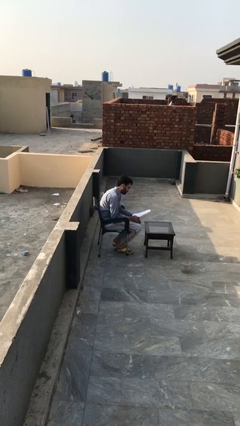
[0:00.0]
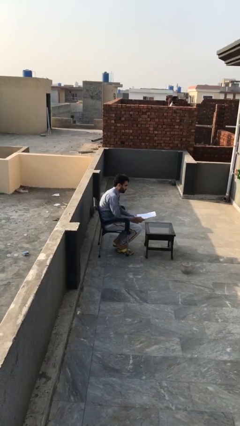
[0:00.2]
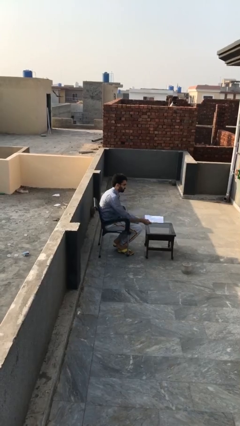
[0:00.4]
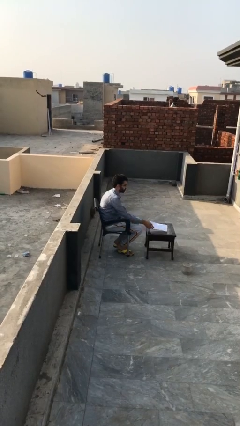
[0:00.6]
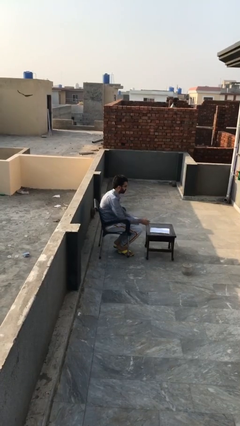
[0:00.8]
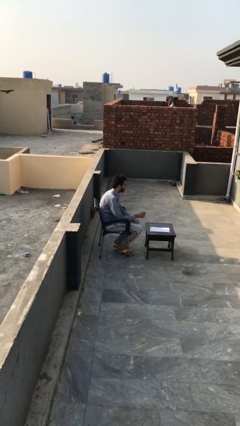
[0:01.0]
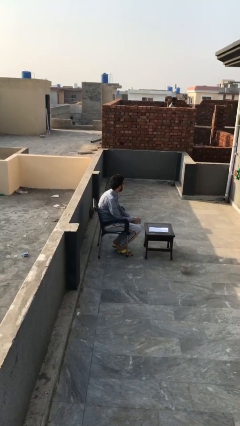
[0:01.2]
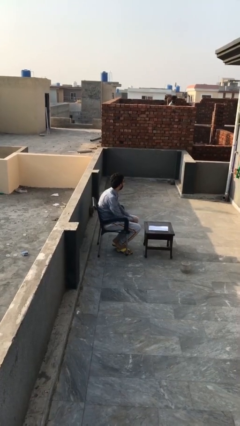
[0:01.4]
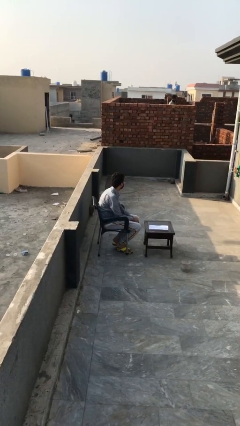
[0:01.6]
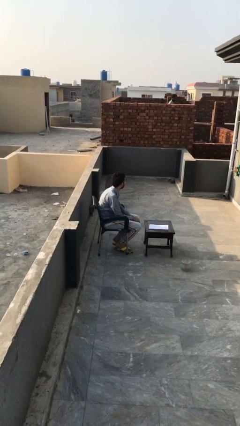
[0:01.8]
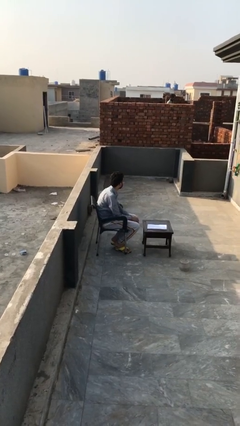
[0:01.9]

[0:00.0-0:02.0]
person puts down object on table

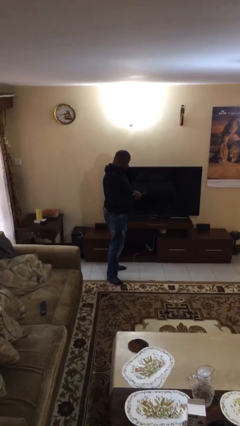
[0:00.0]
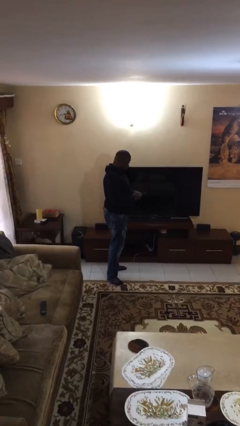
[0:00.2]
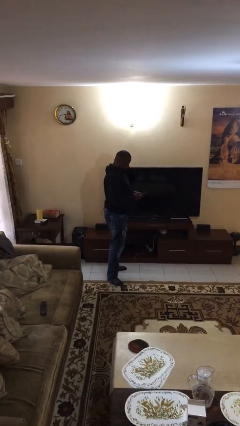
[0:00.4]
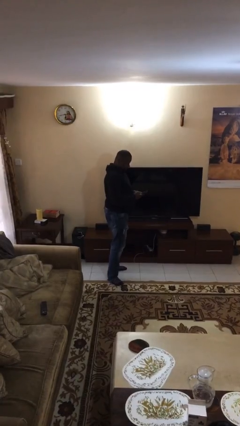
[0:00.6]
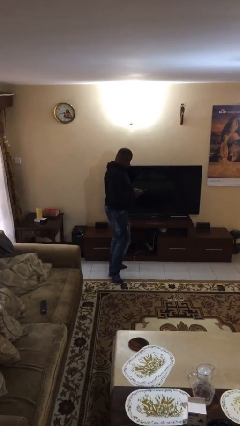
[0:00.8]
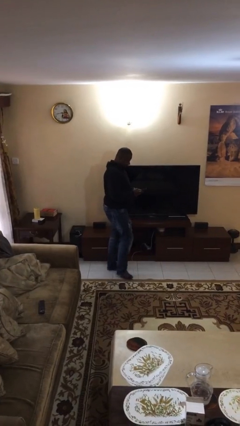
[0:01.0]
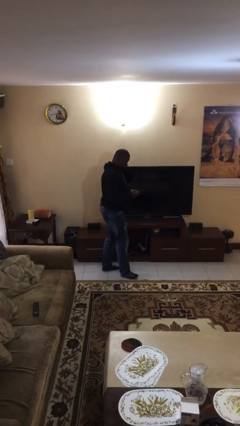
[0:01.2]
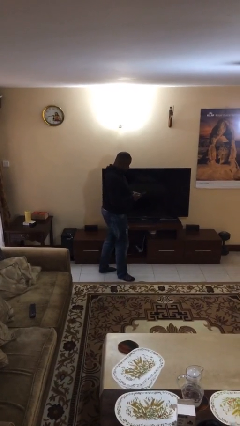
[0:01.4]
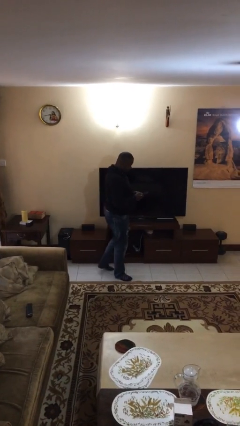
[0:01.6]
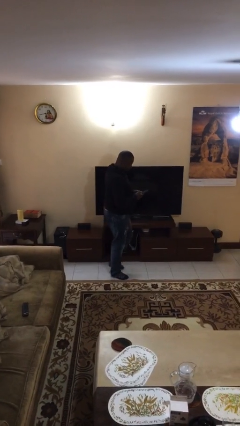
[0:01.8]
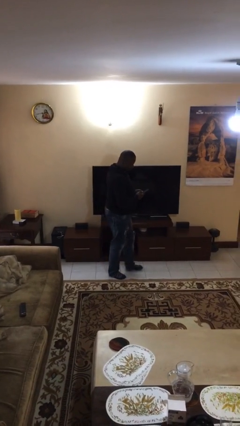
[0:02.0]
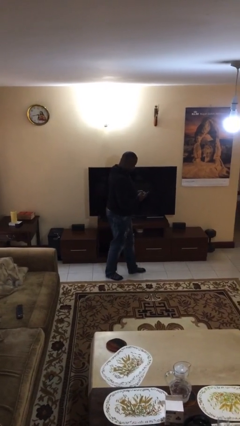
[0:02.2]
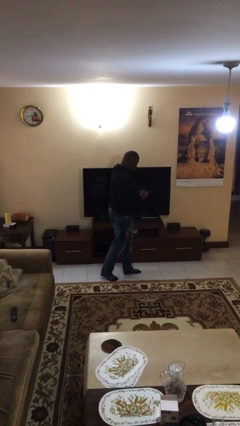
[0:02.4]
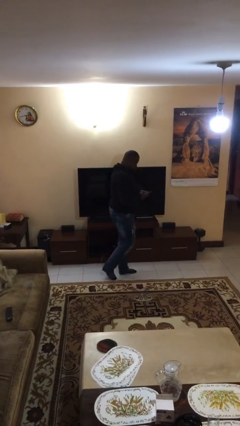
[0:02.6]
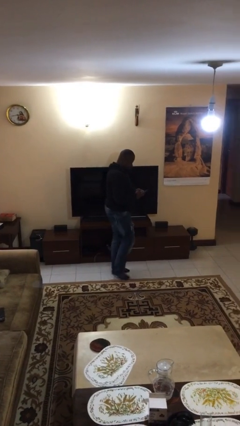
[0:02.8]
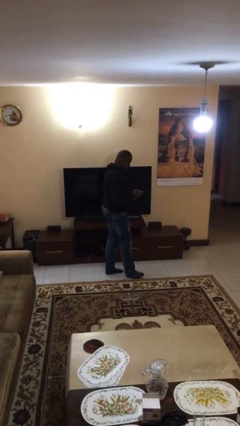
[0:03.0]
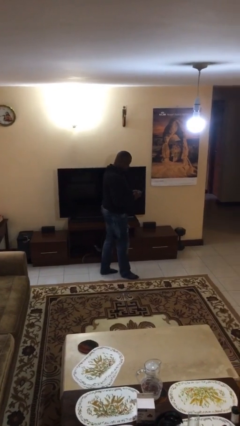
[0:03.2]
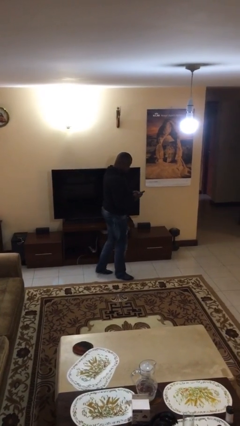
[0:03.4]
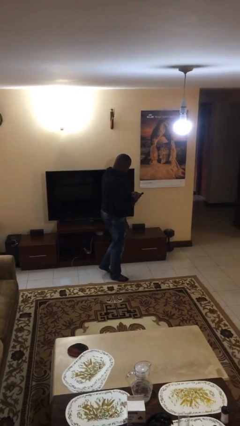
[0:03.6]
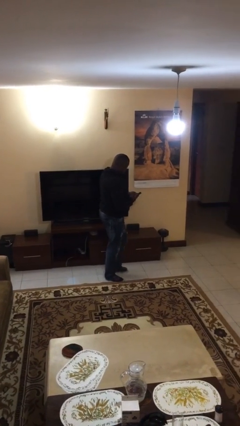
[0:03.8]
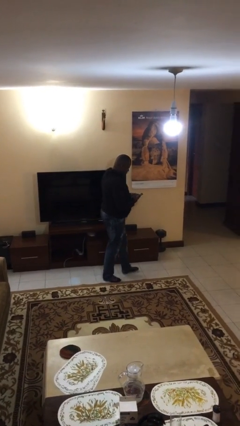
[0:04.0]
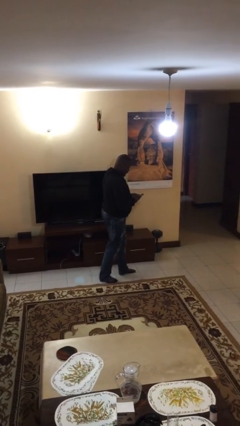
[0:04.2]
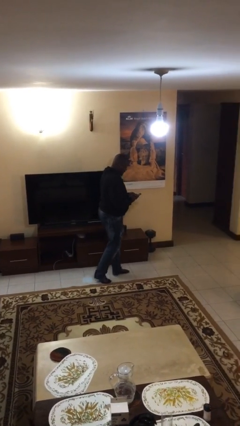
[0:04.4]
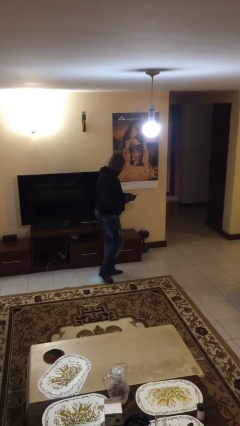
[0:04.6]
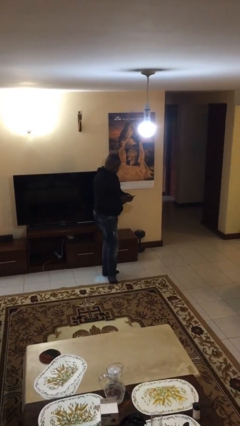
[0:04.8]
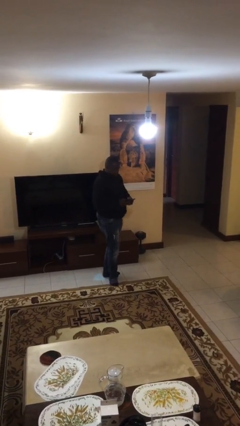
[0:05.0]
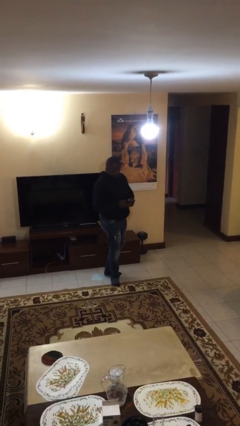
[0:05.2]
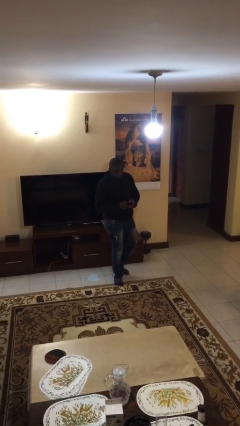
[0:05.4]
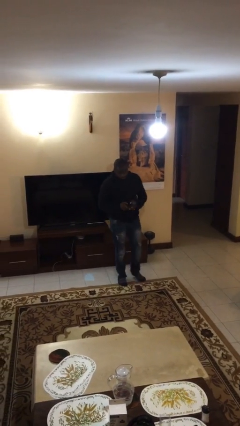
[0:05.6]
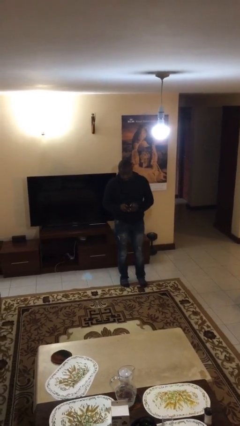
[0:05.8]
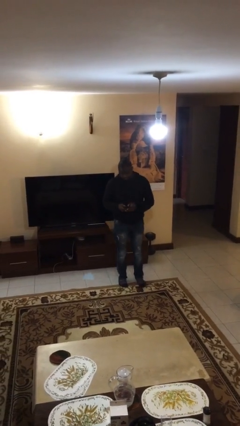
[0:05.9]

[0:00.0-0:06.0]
person texts on phone

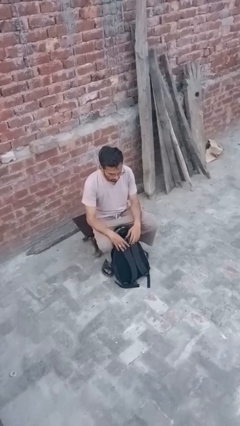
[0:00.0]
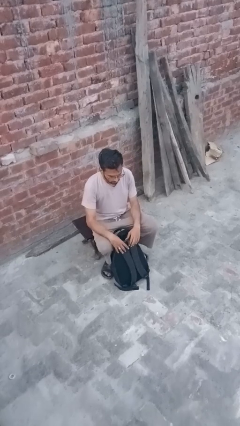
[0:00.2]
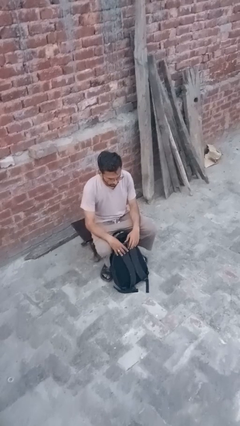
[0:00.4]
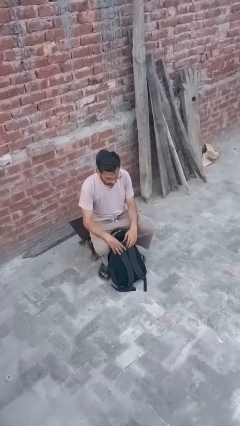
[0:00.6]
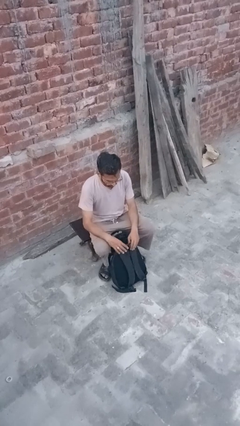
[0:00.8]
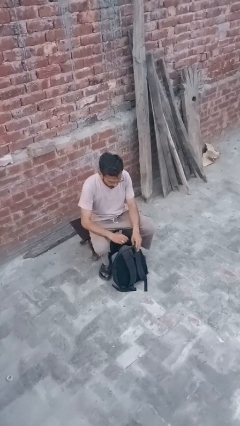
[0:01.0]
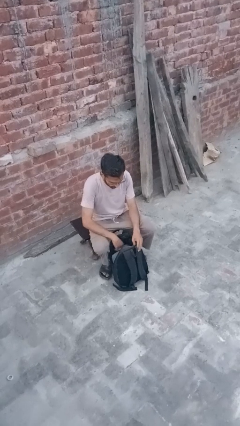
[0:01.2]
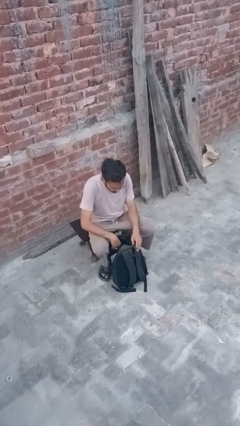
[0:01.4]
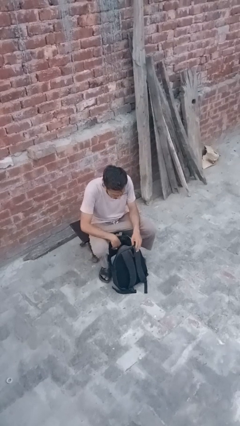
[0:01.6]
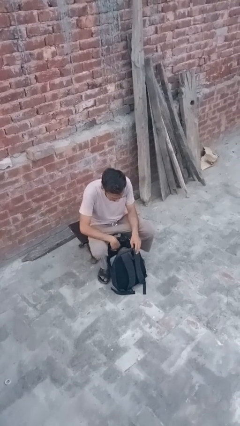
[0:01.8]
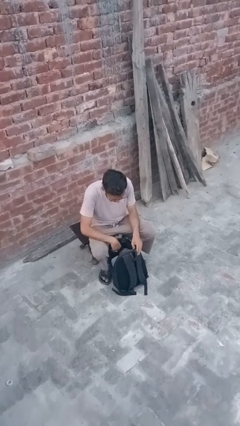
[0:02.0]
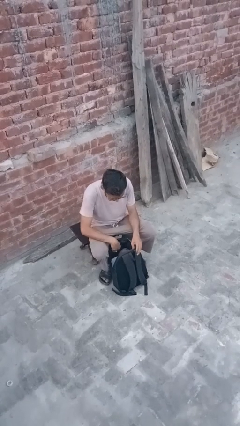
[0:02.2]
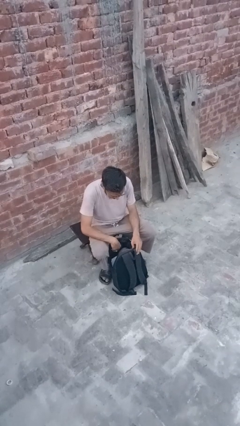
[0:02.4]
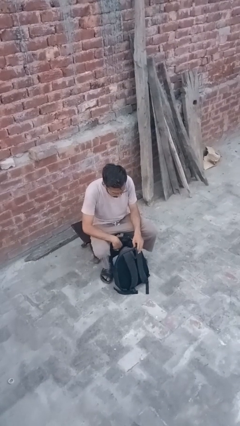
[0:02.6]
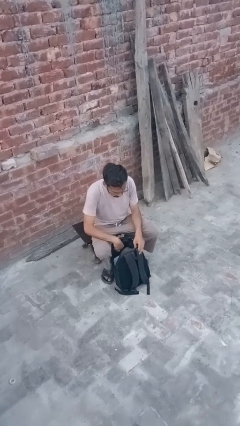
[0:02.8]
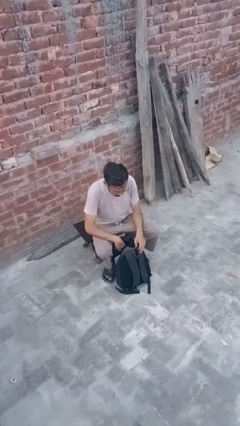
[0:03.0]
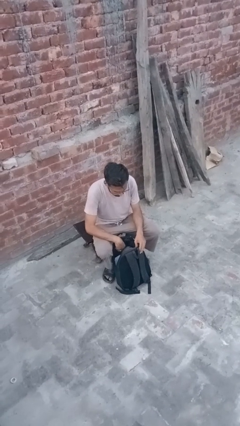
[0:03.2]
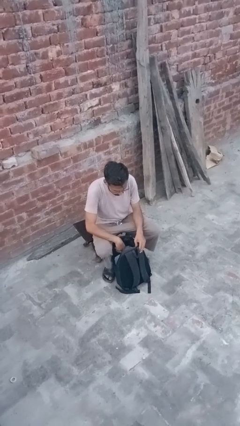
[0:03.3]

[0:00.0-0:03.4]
person searches in backpack

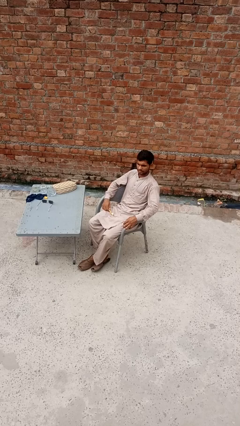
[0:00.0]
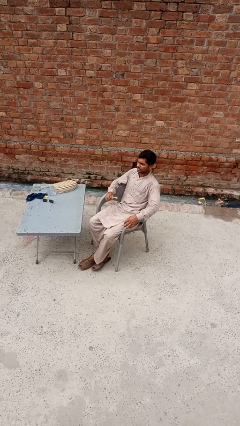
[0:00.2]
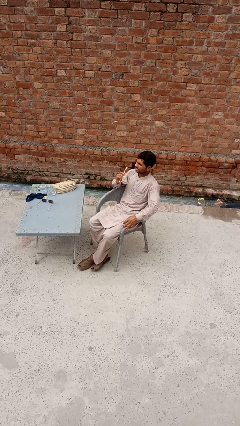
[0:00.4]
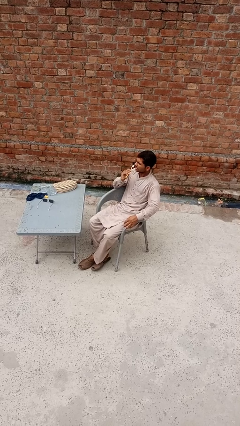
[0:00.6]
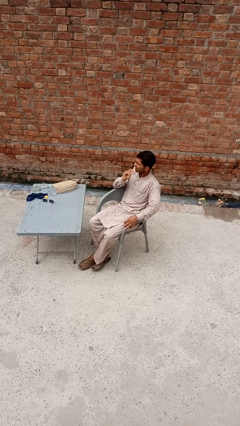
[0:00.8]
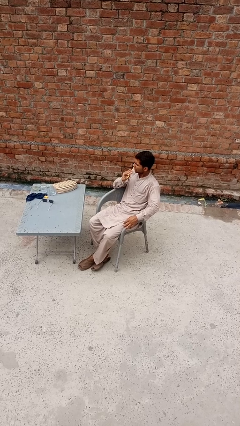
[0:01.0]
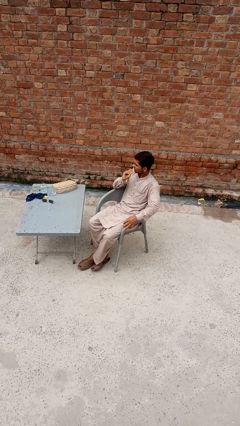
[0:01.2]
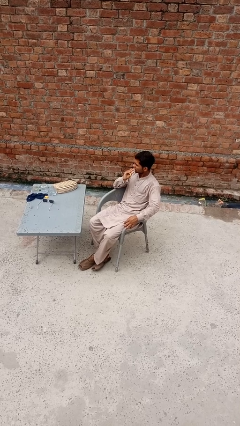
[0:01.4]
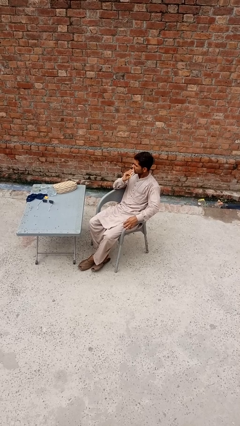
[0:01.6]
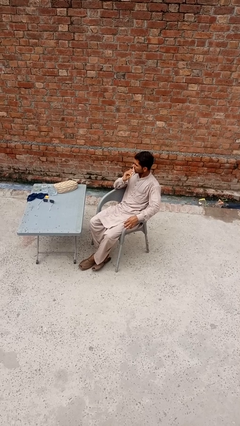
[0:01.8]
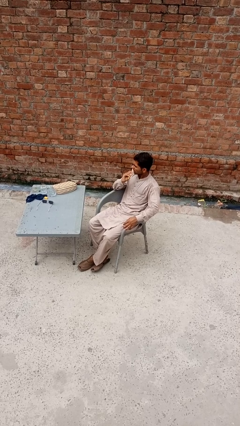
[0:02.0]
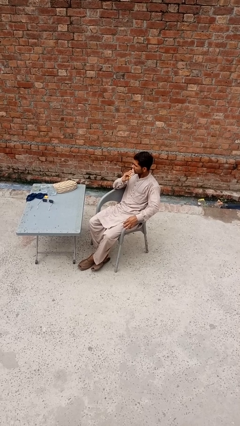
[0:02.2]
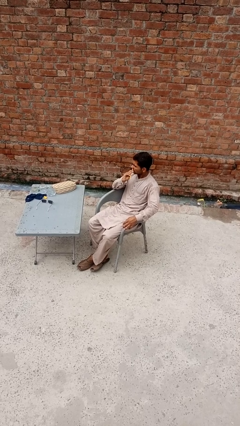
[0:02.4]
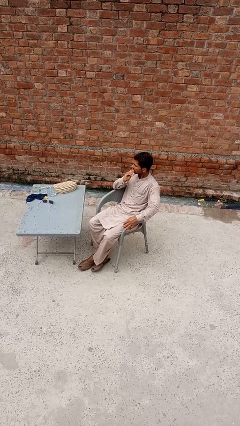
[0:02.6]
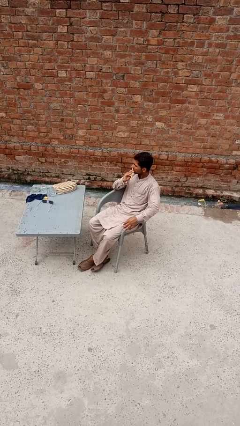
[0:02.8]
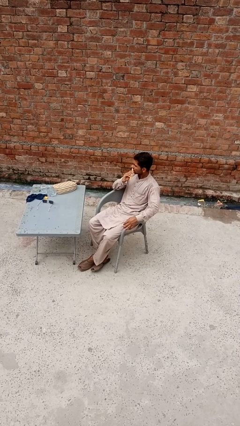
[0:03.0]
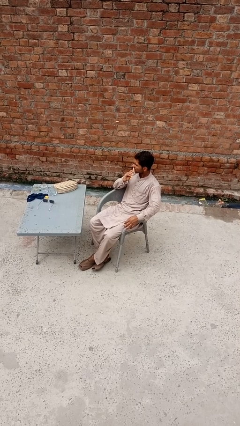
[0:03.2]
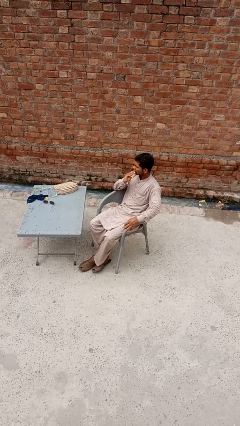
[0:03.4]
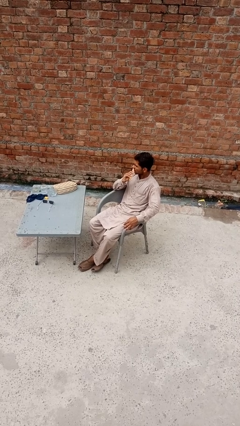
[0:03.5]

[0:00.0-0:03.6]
person brushes teeth

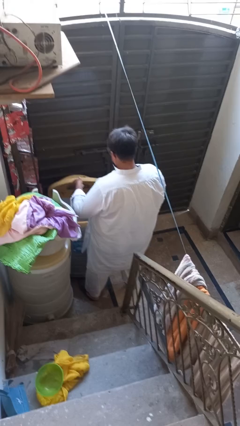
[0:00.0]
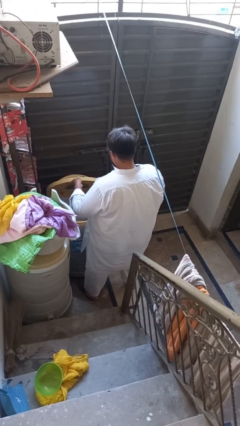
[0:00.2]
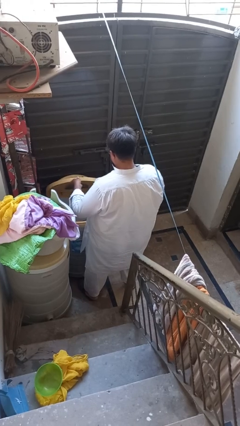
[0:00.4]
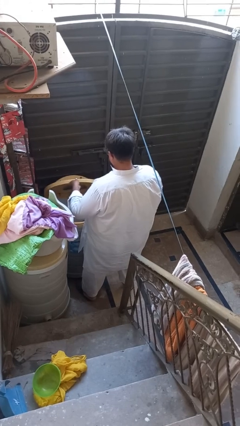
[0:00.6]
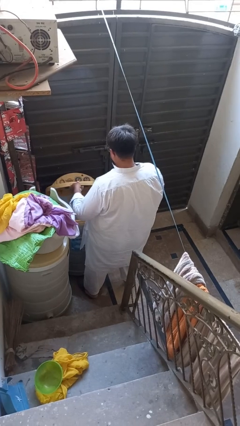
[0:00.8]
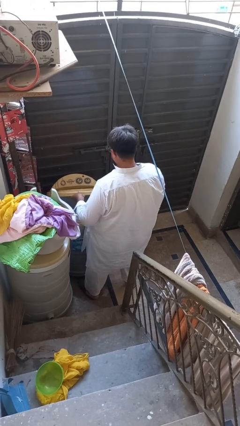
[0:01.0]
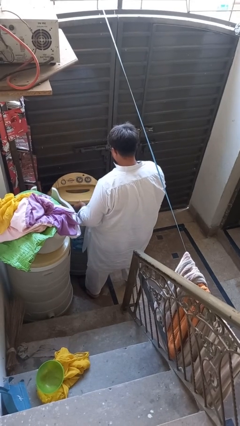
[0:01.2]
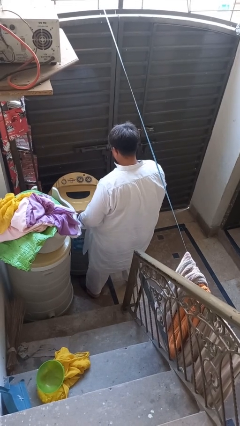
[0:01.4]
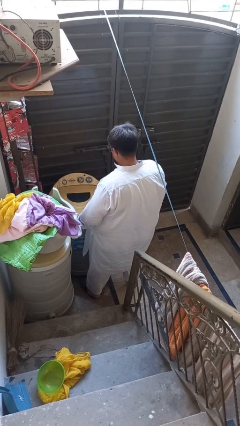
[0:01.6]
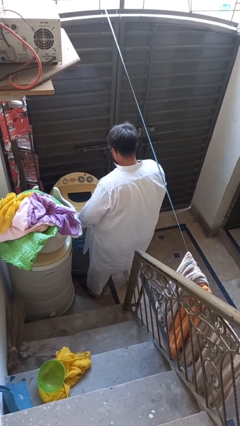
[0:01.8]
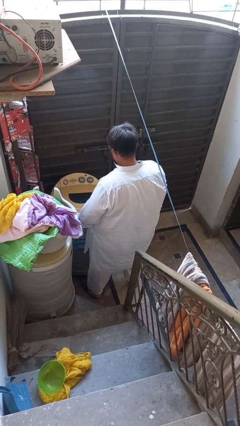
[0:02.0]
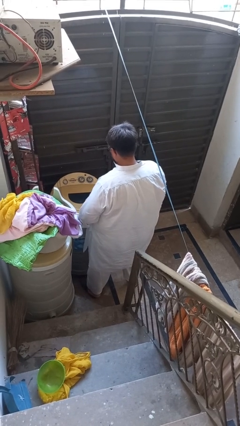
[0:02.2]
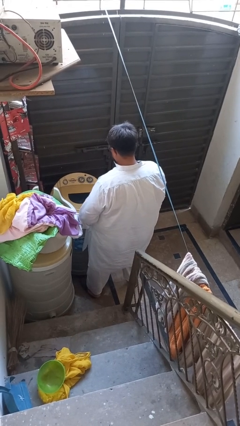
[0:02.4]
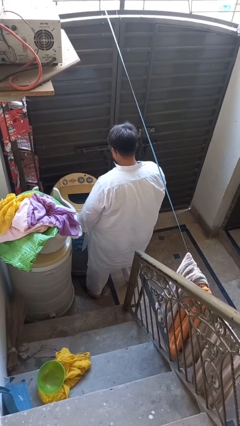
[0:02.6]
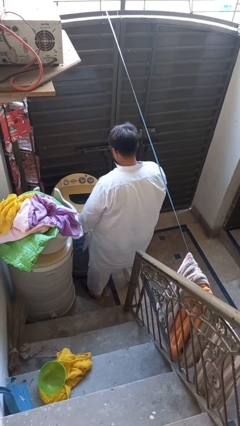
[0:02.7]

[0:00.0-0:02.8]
person closes clothes washer
